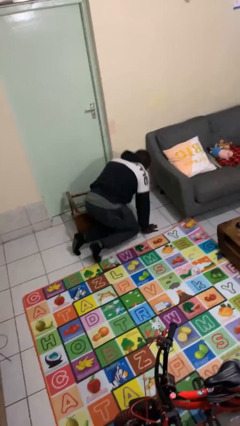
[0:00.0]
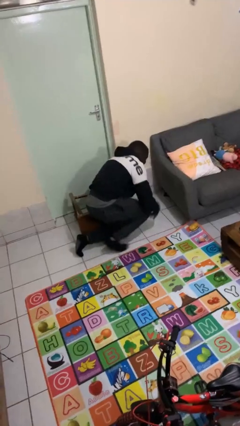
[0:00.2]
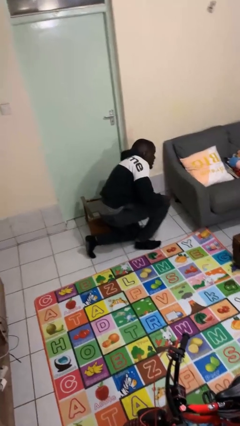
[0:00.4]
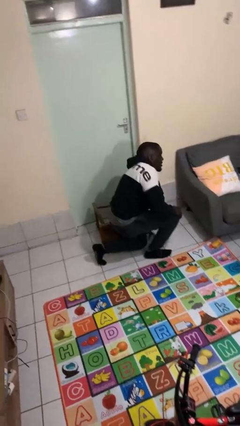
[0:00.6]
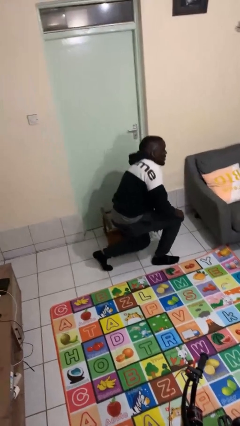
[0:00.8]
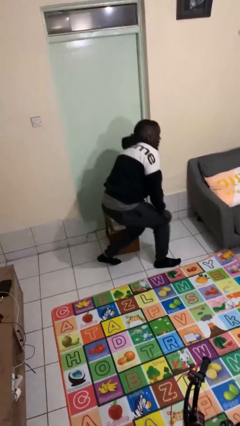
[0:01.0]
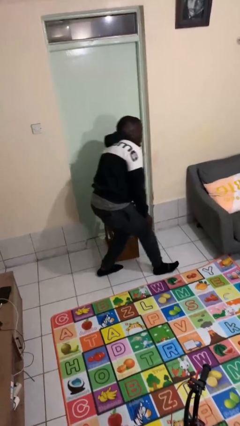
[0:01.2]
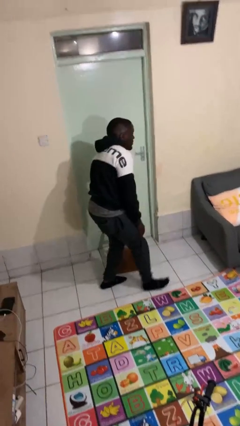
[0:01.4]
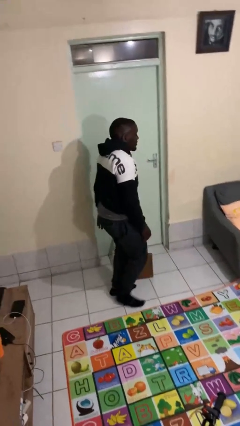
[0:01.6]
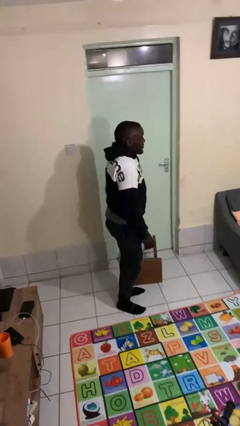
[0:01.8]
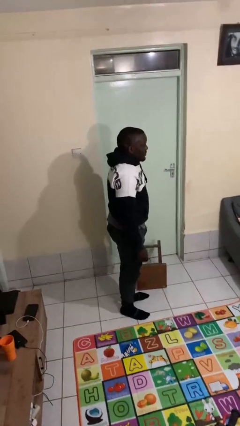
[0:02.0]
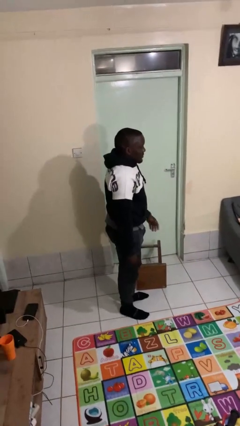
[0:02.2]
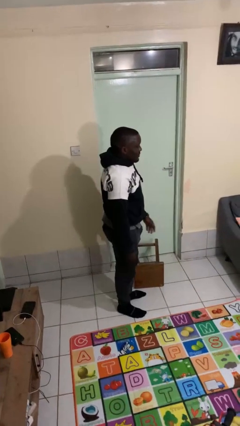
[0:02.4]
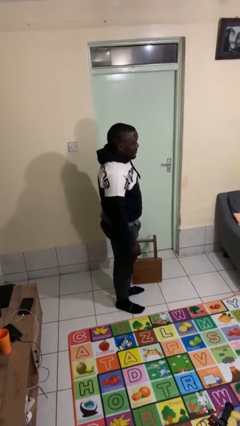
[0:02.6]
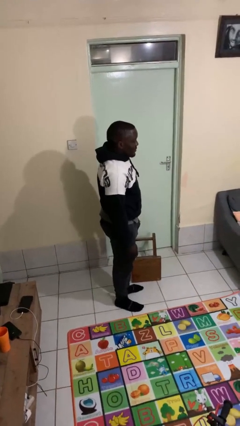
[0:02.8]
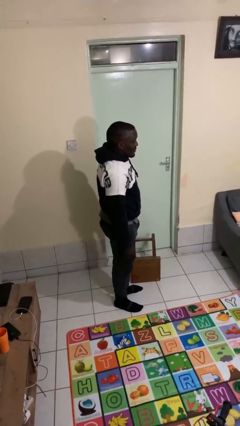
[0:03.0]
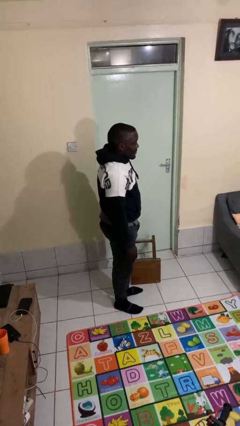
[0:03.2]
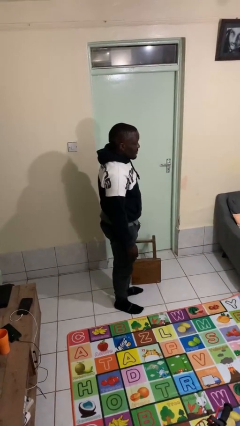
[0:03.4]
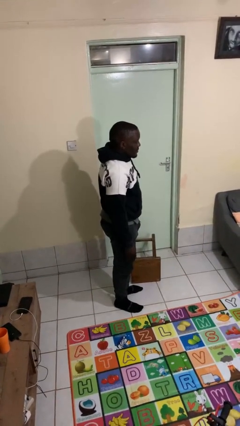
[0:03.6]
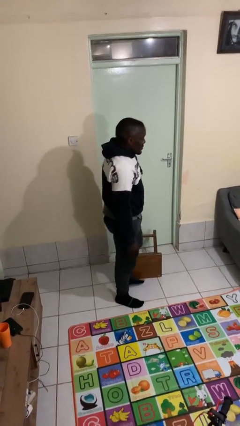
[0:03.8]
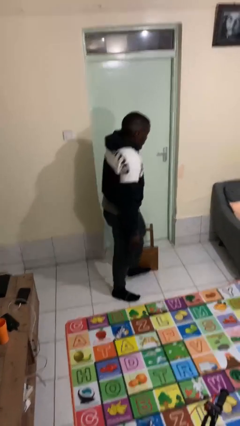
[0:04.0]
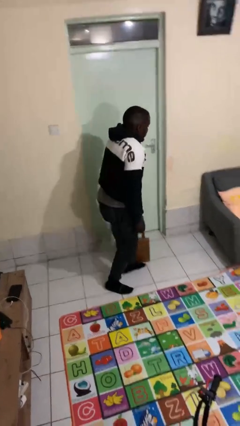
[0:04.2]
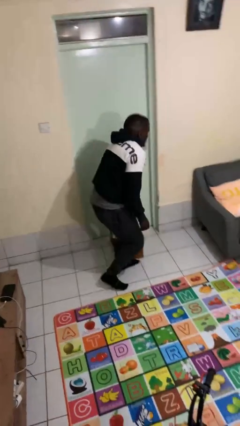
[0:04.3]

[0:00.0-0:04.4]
person stands up from floor

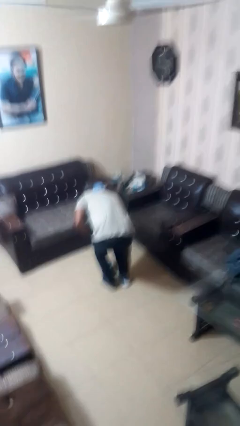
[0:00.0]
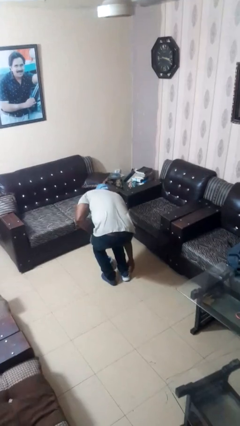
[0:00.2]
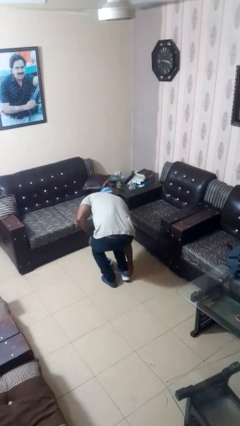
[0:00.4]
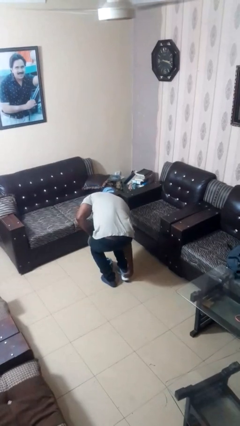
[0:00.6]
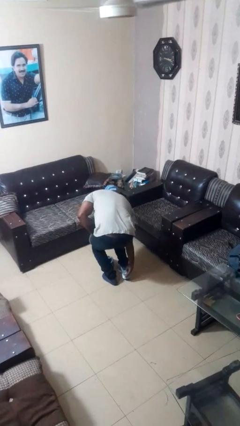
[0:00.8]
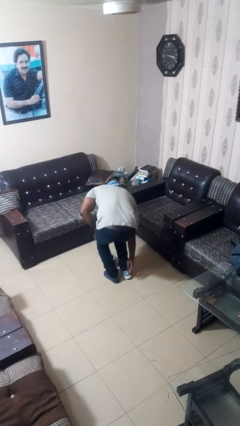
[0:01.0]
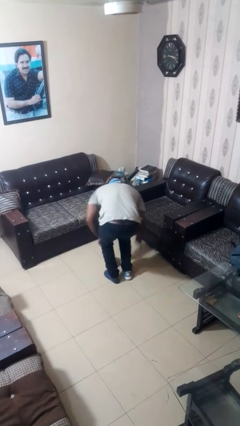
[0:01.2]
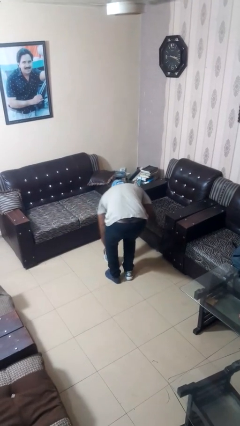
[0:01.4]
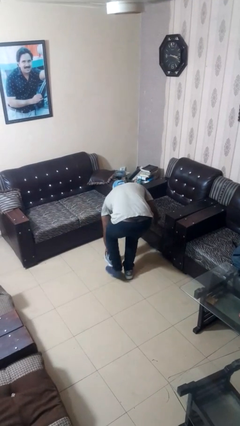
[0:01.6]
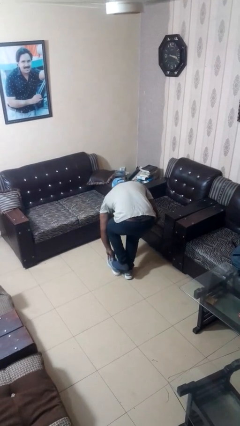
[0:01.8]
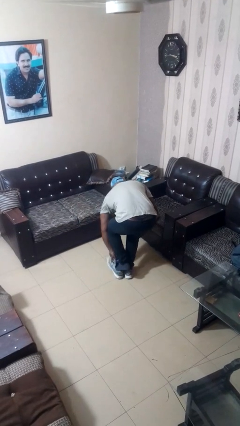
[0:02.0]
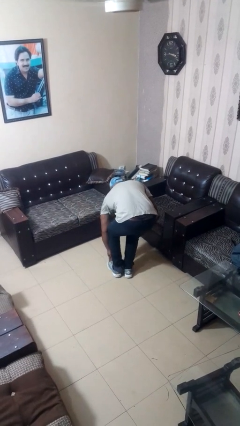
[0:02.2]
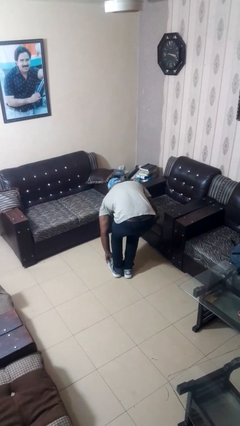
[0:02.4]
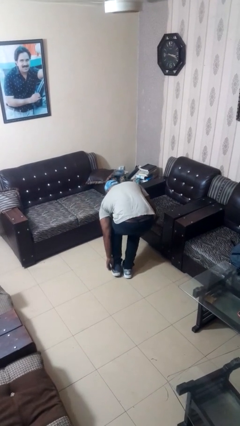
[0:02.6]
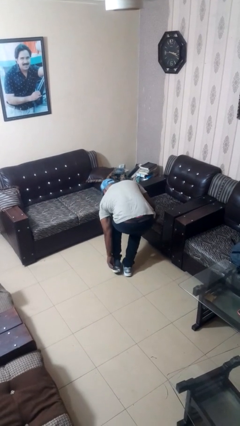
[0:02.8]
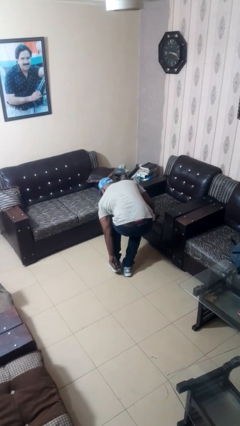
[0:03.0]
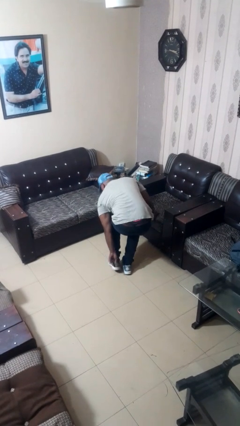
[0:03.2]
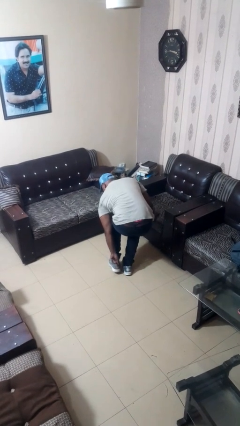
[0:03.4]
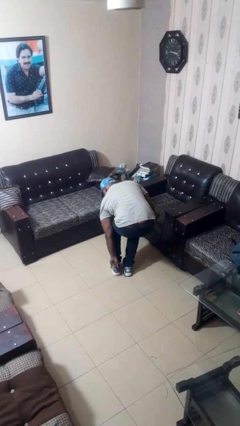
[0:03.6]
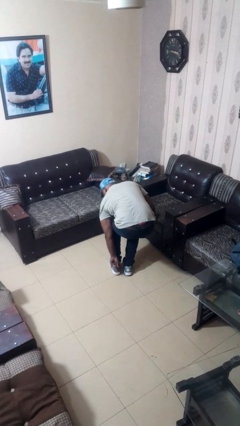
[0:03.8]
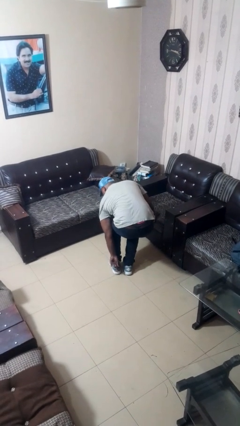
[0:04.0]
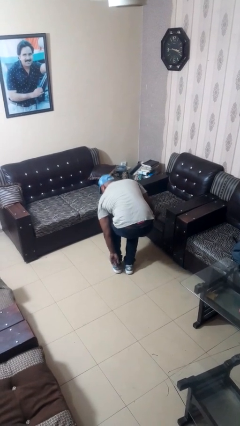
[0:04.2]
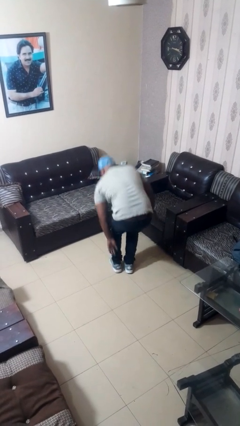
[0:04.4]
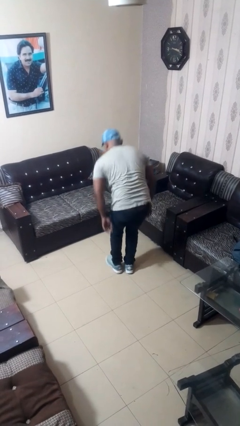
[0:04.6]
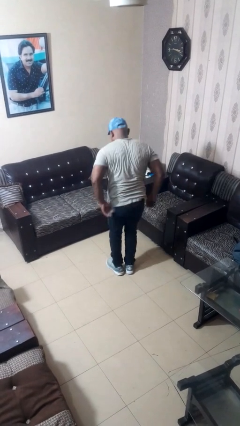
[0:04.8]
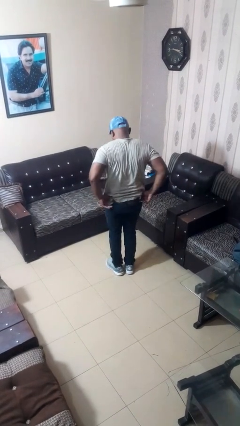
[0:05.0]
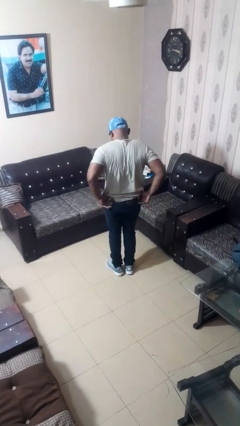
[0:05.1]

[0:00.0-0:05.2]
person puts on shoes

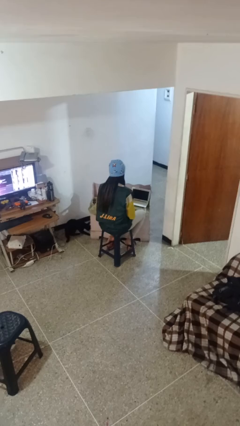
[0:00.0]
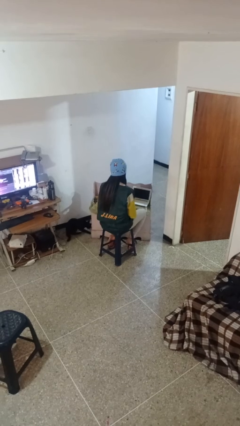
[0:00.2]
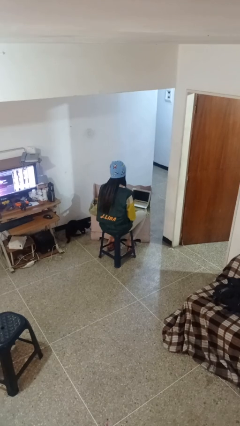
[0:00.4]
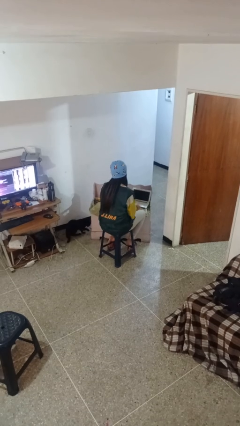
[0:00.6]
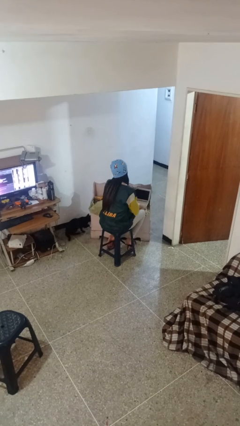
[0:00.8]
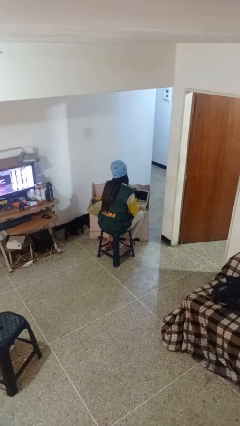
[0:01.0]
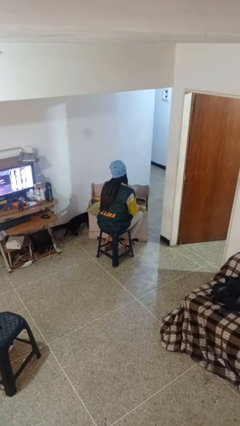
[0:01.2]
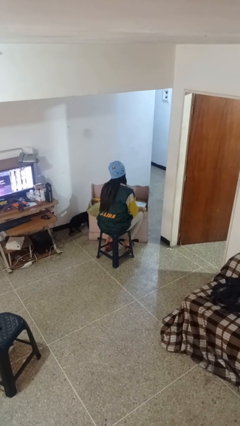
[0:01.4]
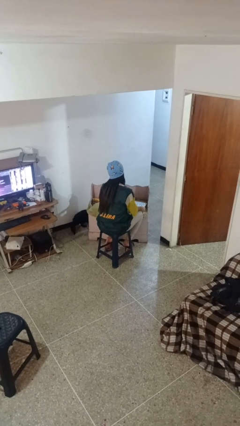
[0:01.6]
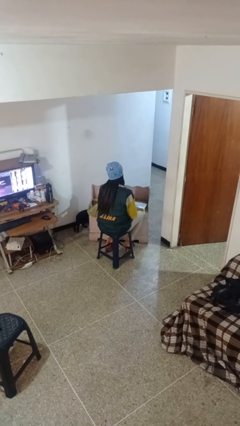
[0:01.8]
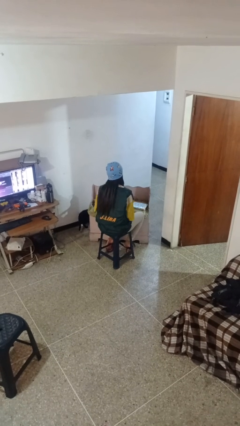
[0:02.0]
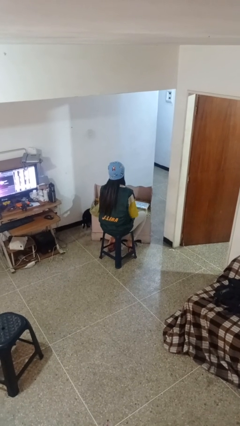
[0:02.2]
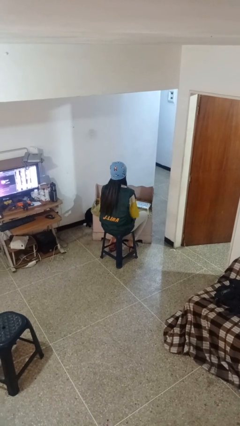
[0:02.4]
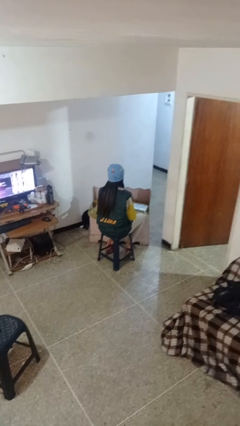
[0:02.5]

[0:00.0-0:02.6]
person closes laptop

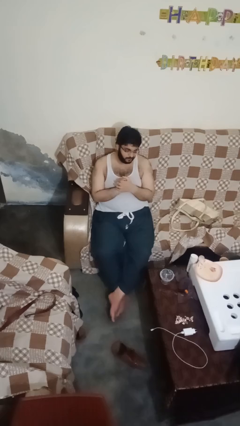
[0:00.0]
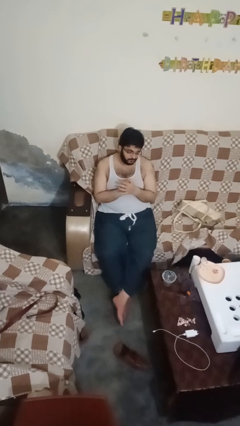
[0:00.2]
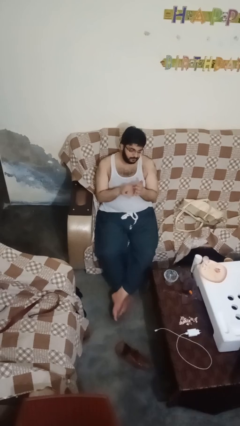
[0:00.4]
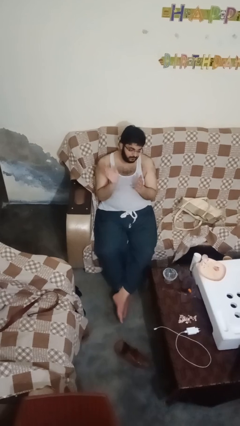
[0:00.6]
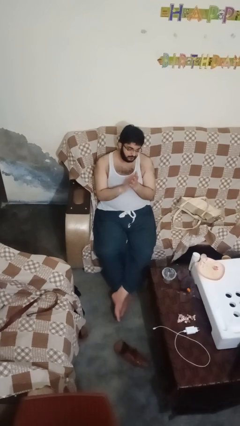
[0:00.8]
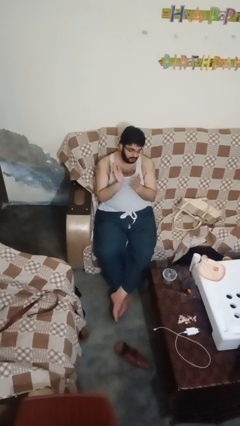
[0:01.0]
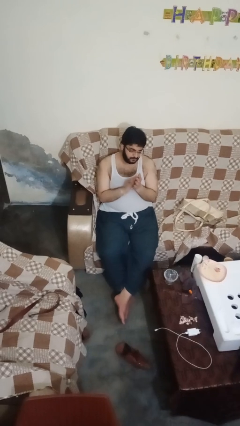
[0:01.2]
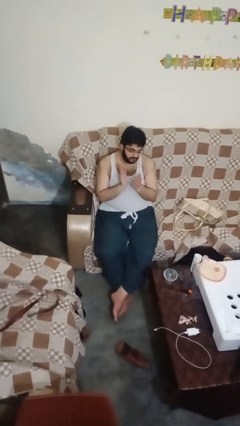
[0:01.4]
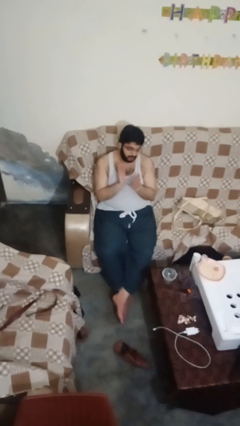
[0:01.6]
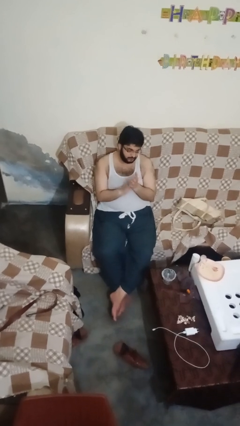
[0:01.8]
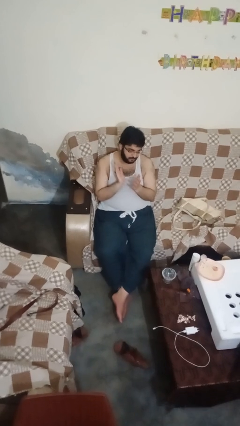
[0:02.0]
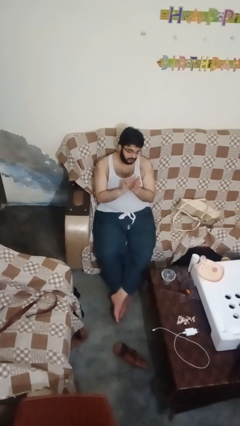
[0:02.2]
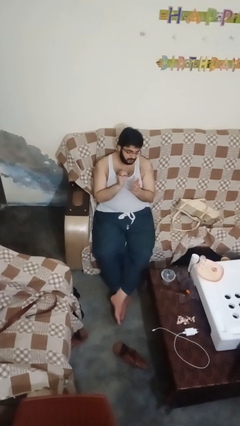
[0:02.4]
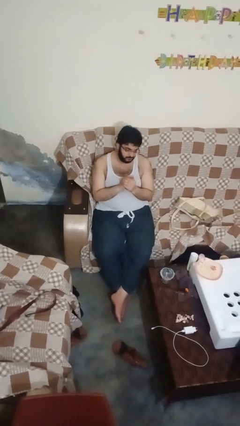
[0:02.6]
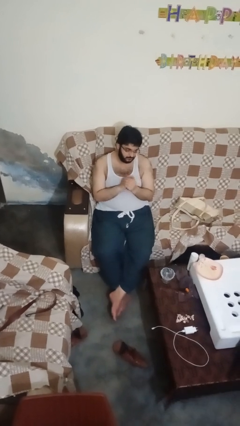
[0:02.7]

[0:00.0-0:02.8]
person claps hands

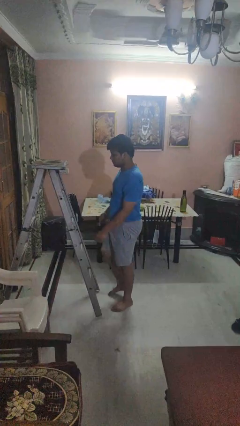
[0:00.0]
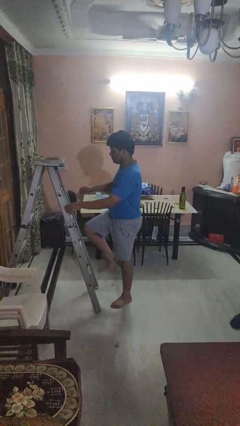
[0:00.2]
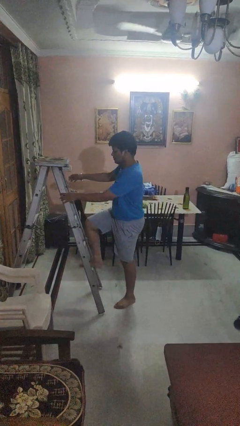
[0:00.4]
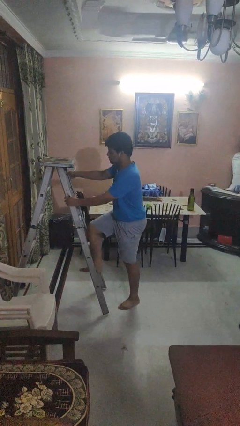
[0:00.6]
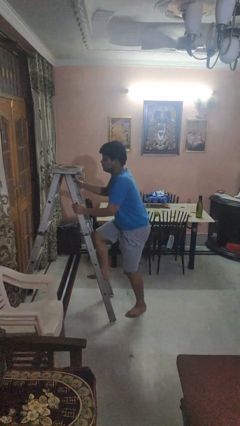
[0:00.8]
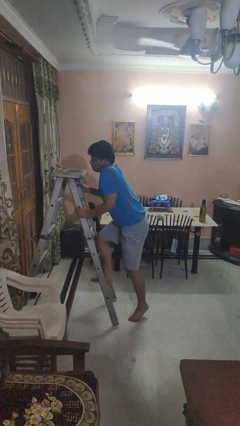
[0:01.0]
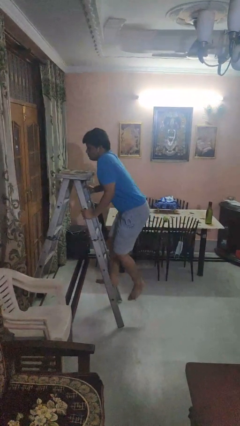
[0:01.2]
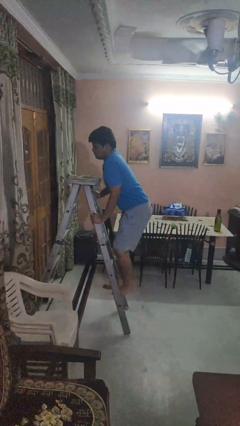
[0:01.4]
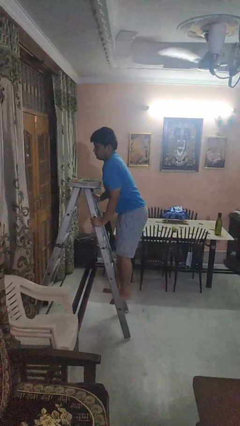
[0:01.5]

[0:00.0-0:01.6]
person climbs up ladder

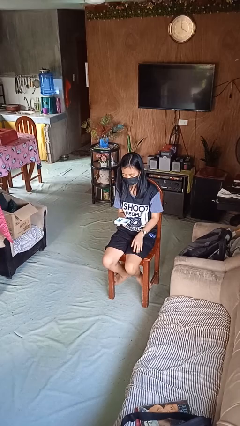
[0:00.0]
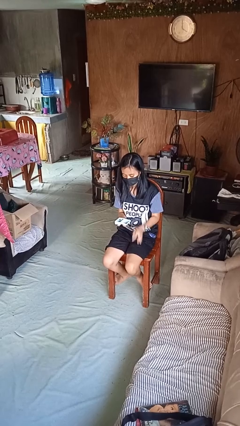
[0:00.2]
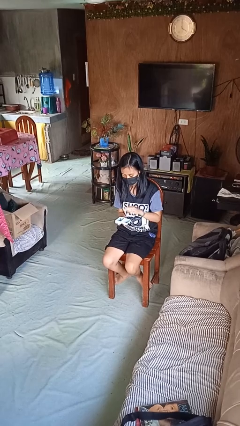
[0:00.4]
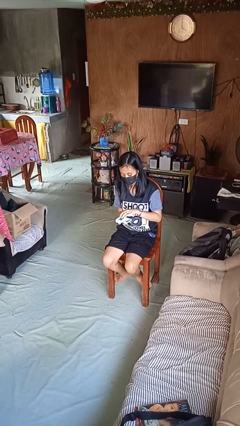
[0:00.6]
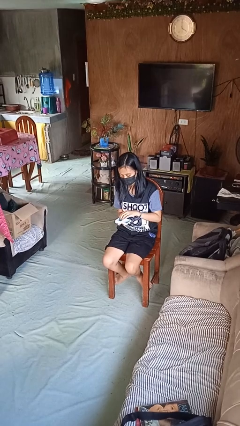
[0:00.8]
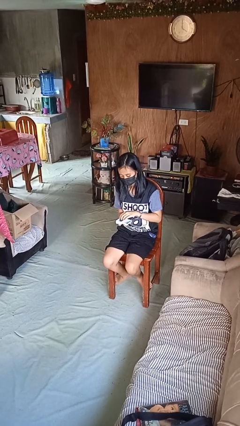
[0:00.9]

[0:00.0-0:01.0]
person searches jewelry box
